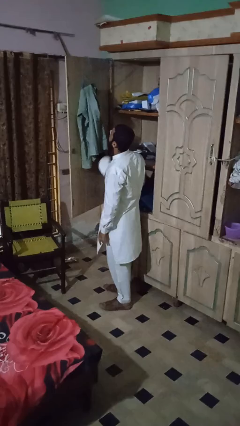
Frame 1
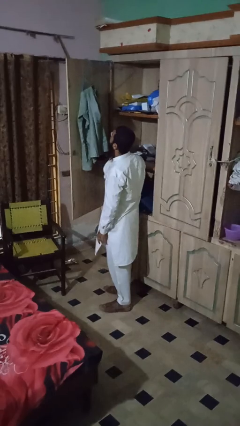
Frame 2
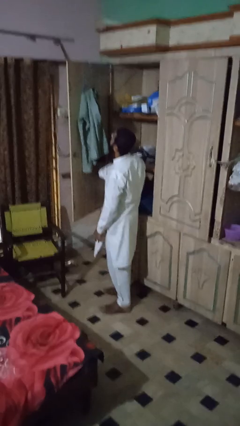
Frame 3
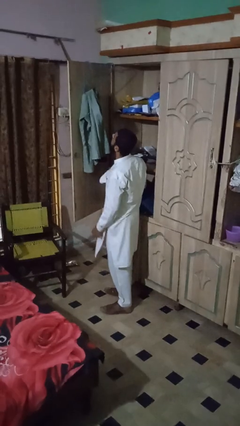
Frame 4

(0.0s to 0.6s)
person puts clothes into closet

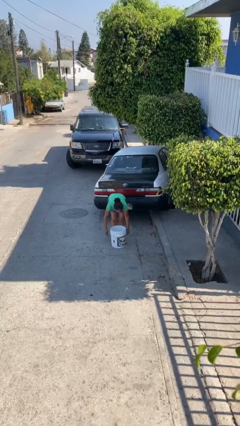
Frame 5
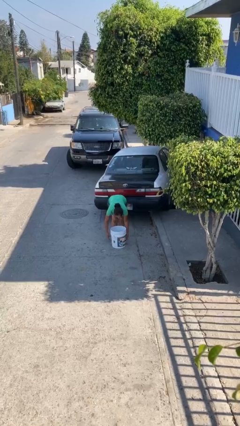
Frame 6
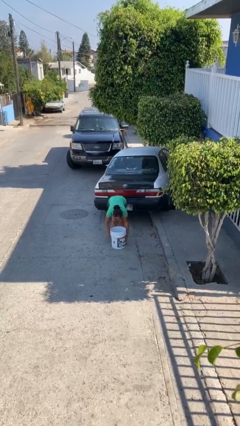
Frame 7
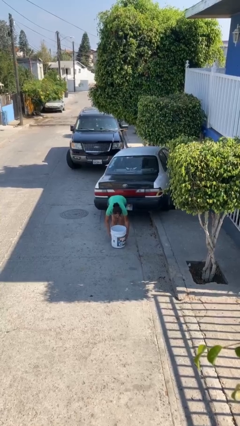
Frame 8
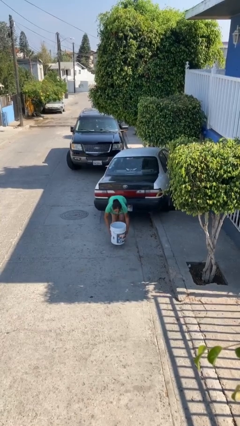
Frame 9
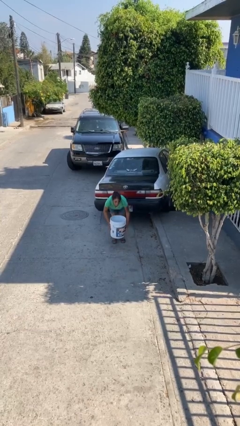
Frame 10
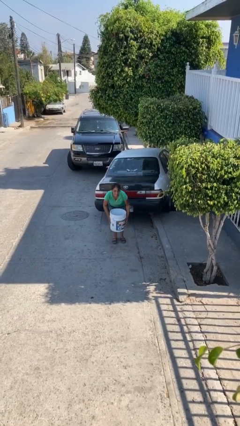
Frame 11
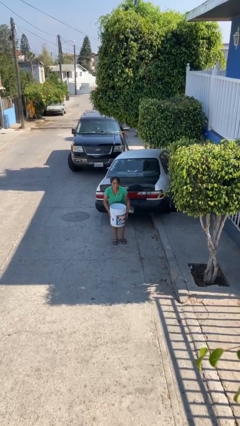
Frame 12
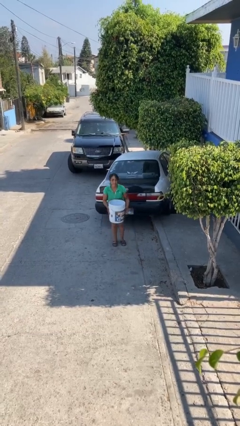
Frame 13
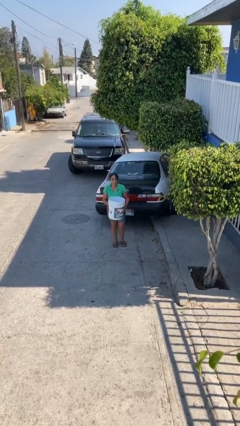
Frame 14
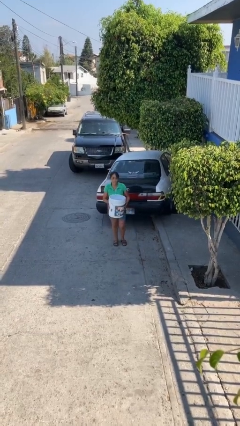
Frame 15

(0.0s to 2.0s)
person picks up object from floor

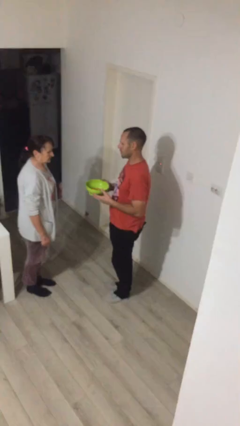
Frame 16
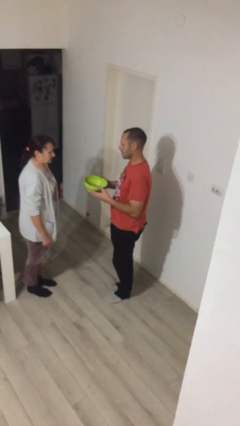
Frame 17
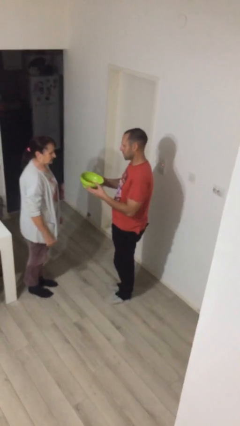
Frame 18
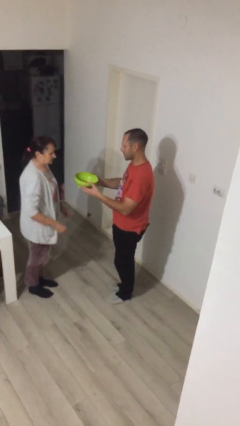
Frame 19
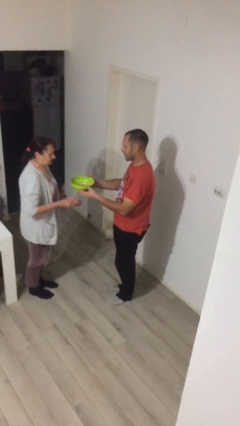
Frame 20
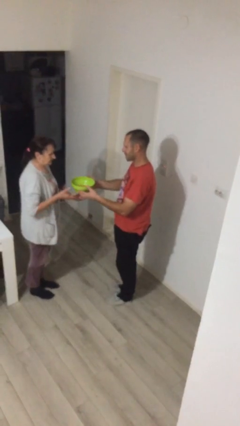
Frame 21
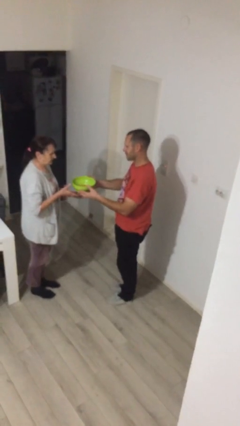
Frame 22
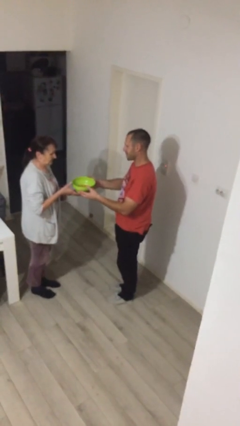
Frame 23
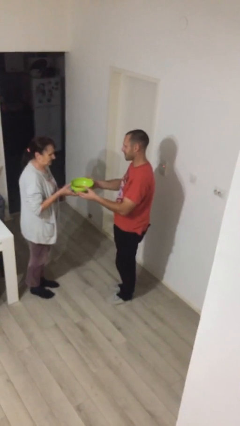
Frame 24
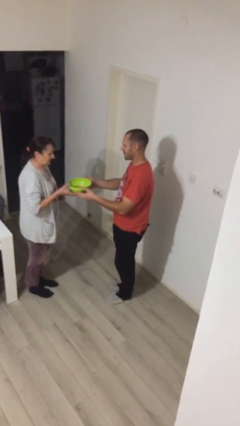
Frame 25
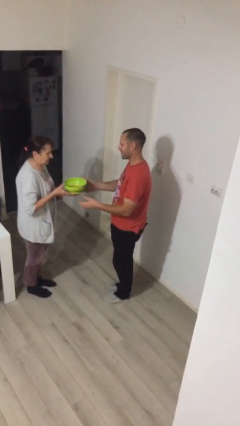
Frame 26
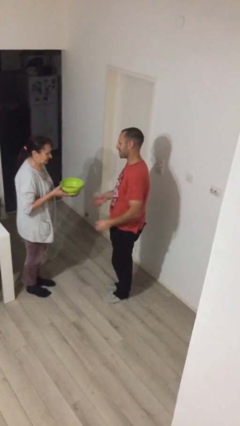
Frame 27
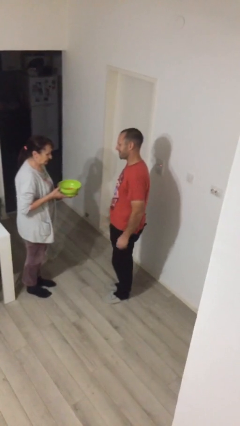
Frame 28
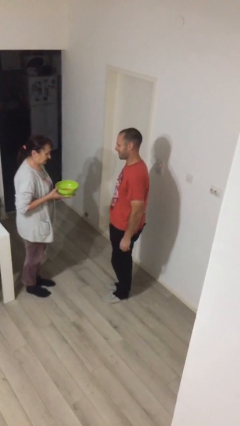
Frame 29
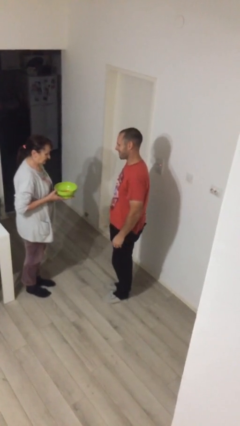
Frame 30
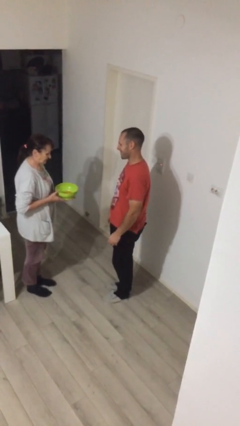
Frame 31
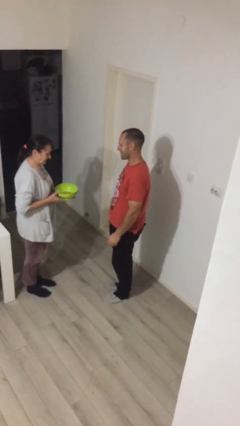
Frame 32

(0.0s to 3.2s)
person transfers object to person

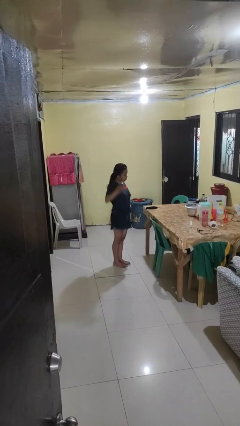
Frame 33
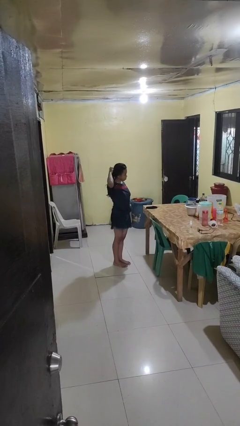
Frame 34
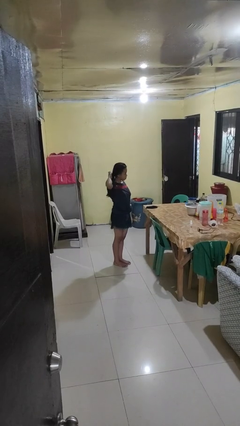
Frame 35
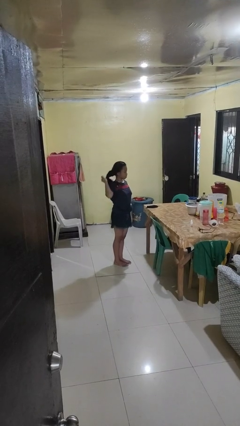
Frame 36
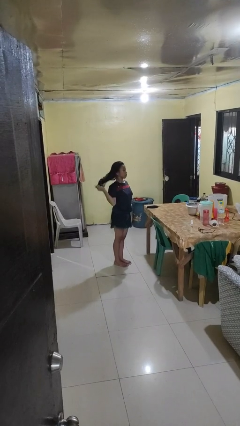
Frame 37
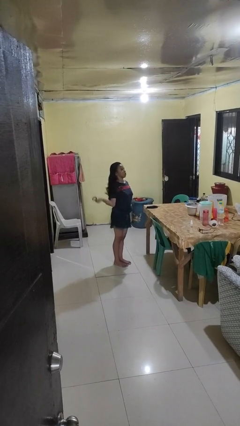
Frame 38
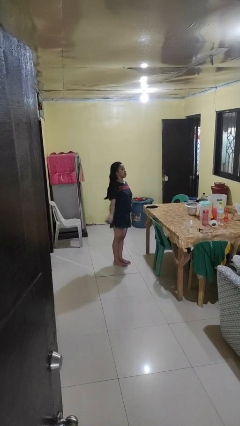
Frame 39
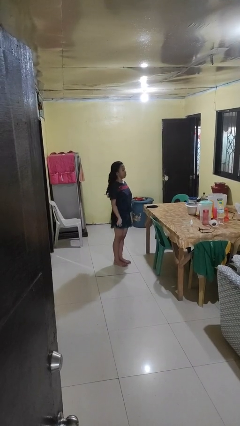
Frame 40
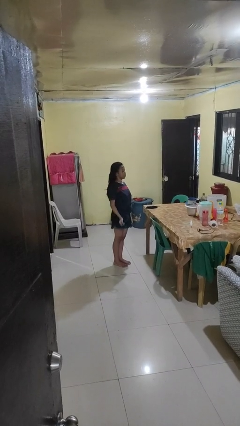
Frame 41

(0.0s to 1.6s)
person takes off hairtie

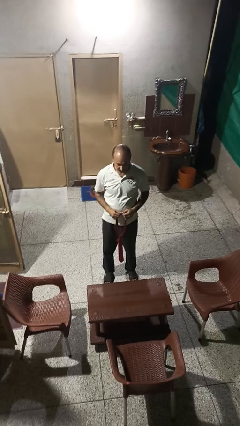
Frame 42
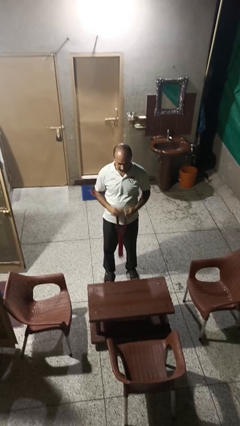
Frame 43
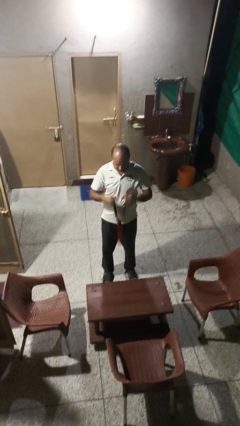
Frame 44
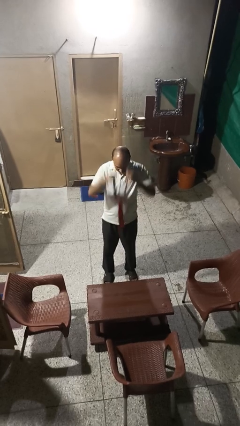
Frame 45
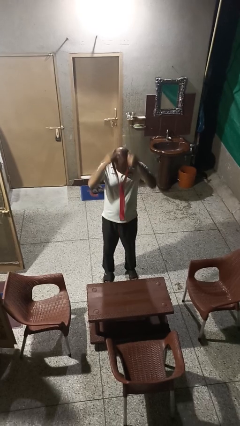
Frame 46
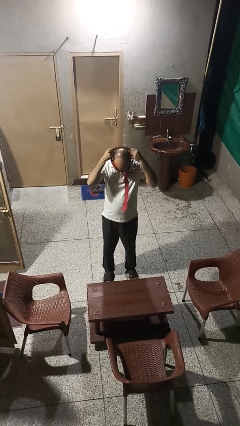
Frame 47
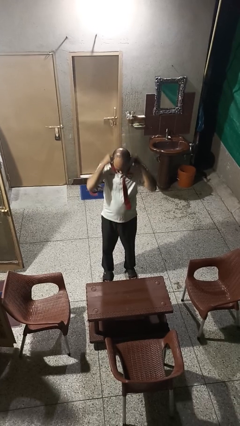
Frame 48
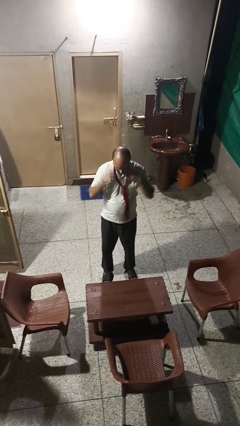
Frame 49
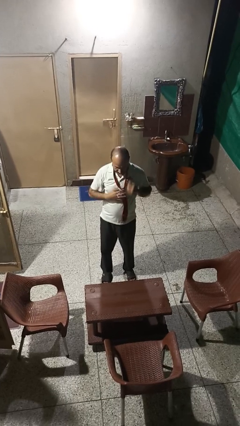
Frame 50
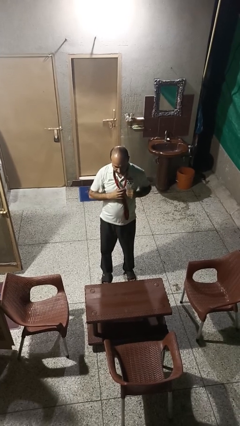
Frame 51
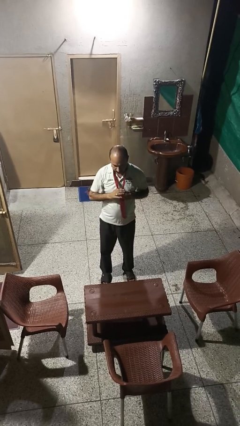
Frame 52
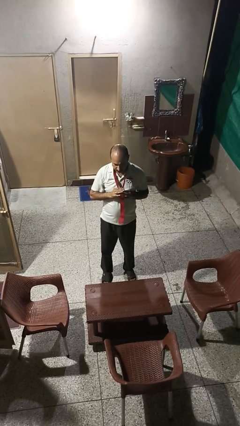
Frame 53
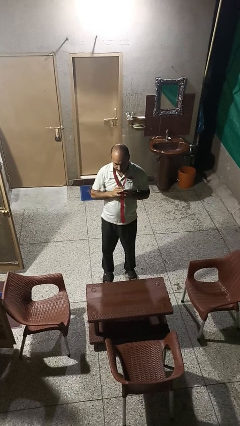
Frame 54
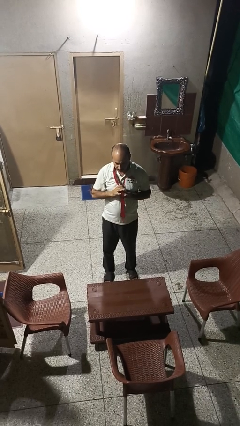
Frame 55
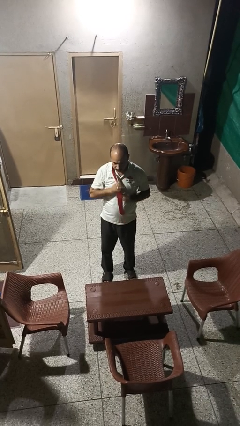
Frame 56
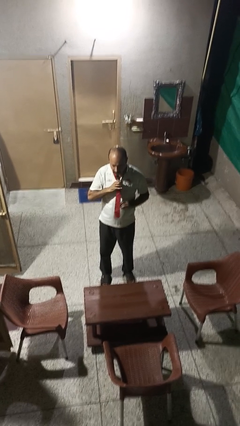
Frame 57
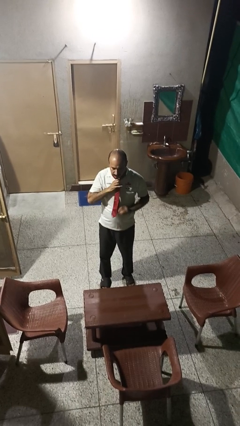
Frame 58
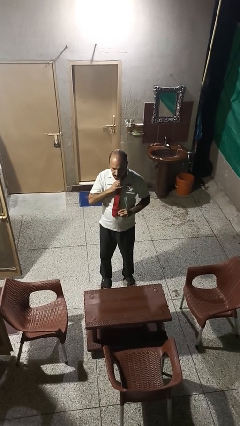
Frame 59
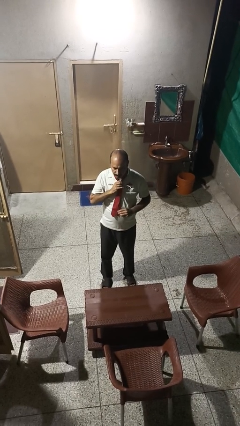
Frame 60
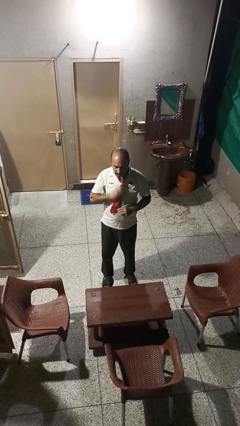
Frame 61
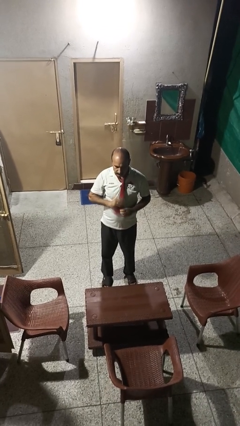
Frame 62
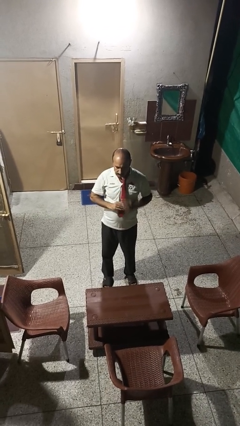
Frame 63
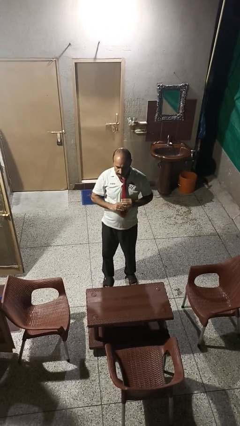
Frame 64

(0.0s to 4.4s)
person puts on necktie

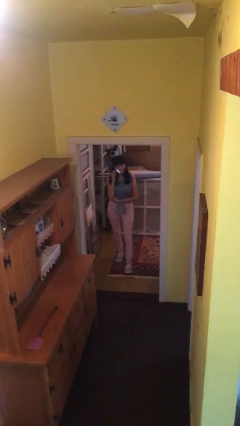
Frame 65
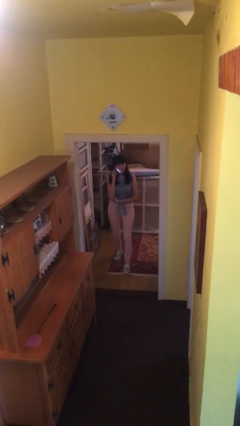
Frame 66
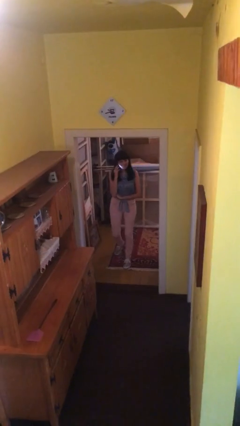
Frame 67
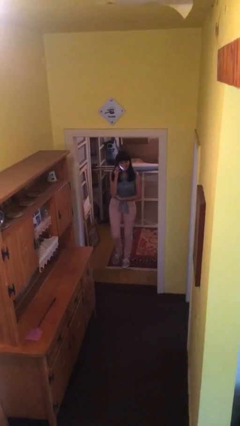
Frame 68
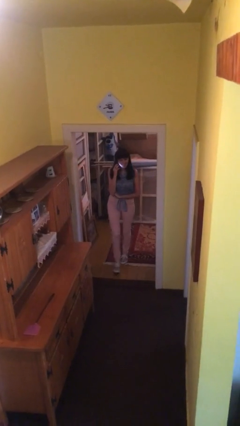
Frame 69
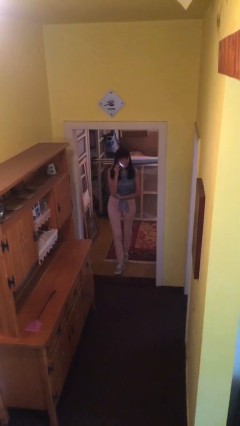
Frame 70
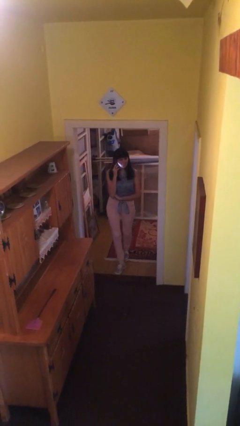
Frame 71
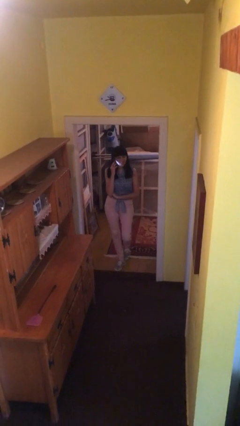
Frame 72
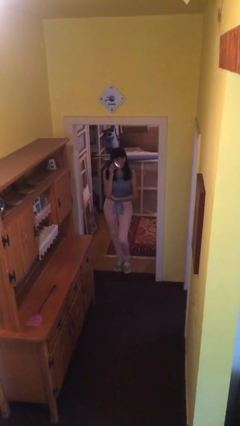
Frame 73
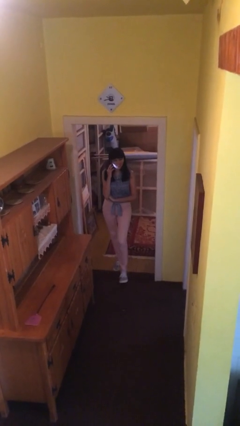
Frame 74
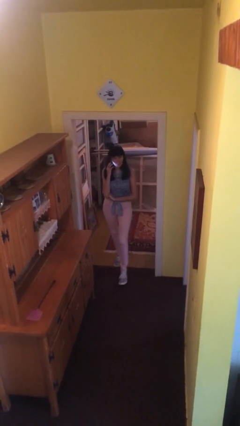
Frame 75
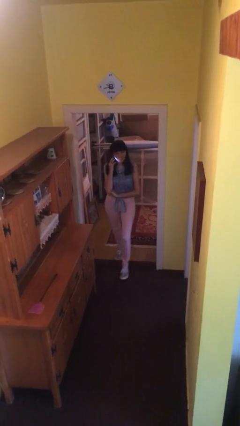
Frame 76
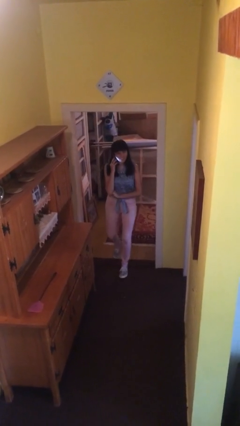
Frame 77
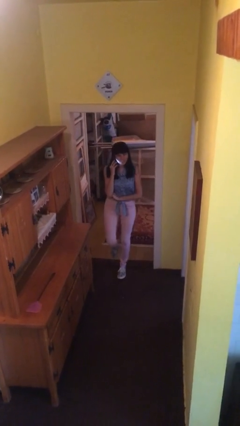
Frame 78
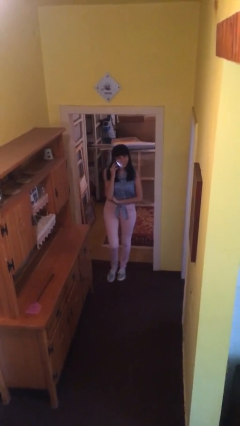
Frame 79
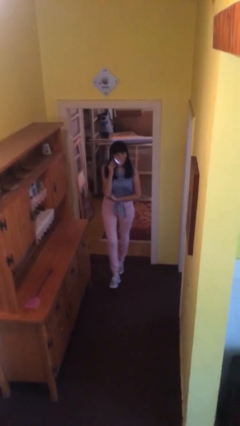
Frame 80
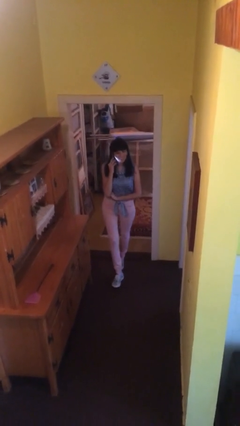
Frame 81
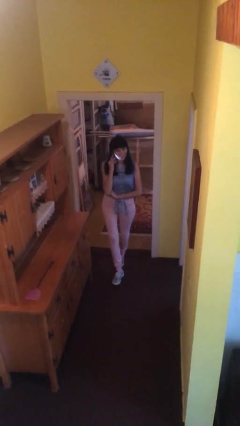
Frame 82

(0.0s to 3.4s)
person enters scene through structure

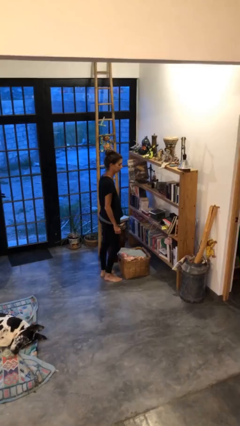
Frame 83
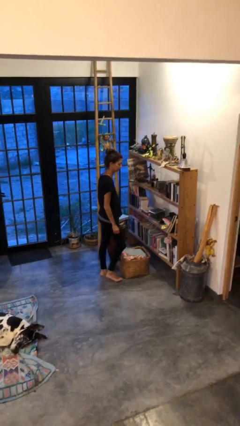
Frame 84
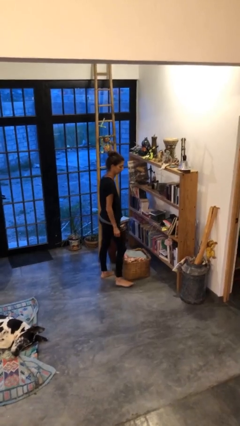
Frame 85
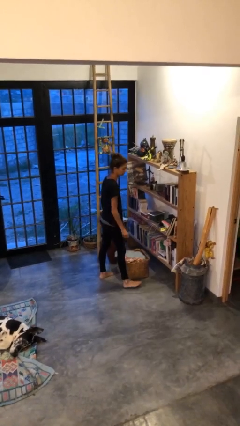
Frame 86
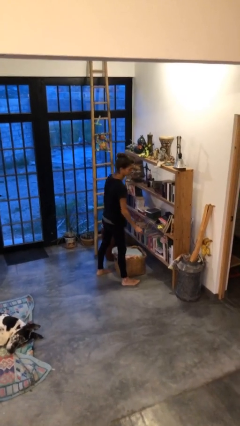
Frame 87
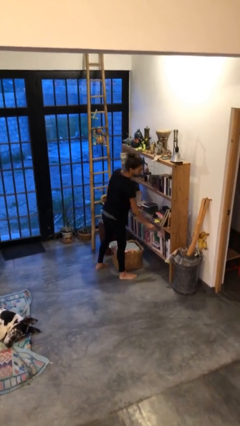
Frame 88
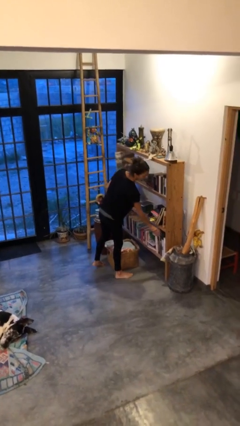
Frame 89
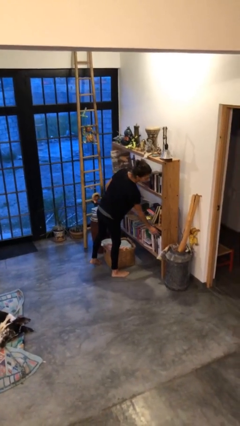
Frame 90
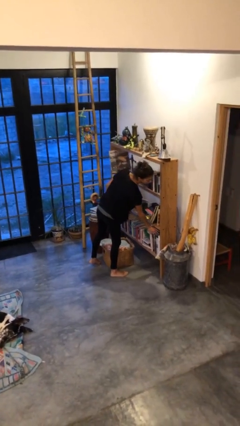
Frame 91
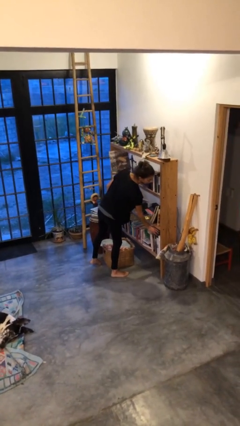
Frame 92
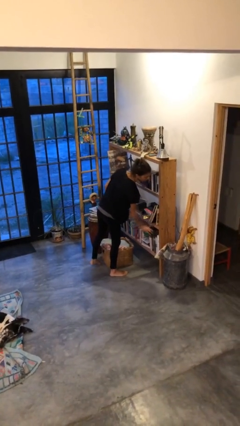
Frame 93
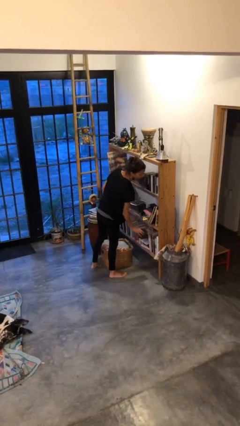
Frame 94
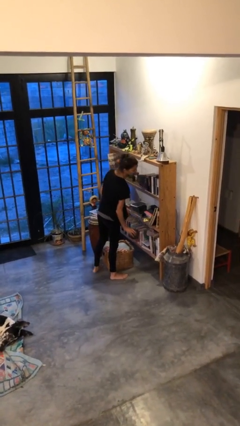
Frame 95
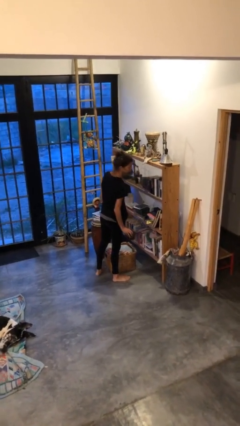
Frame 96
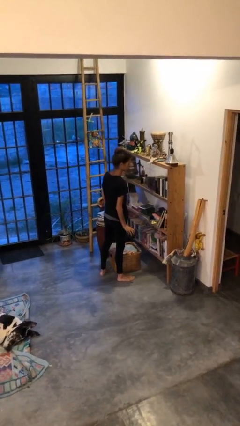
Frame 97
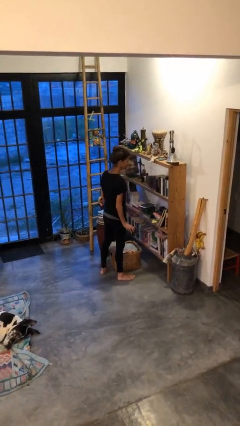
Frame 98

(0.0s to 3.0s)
person picks up object from cabinet
